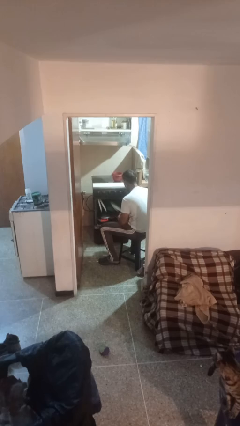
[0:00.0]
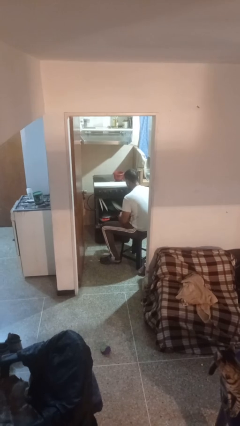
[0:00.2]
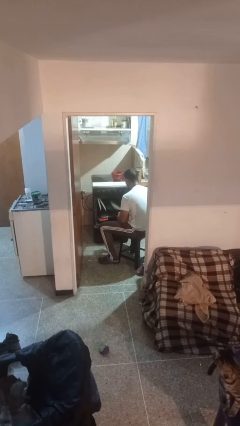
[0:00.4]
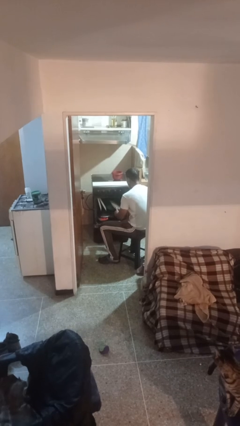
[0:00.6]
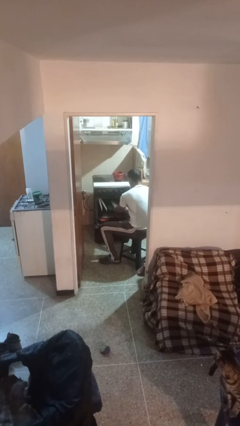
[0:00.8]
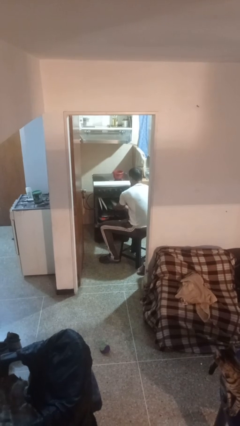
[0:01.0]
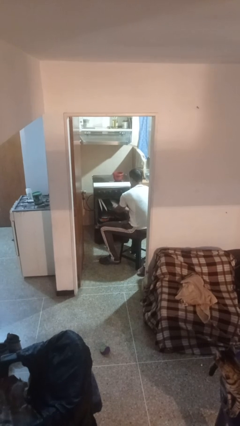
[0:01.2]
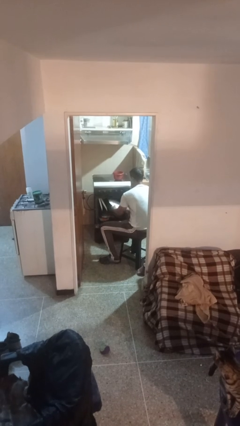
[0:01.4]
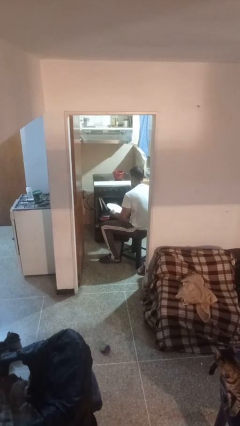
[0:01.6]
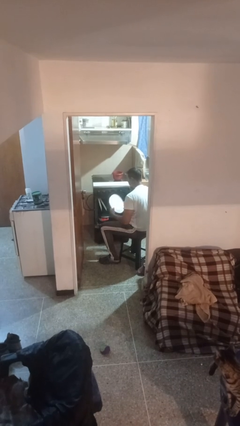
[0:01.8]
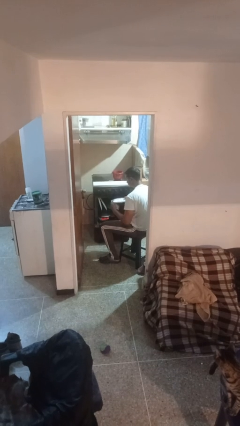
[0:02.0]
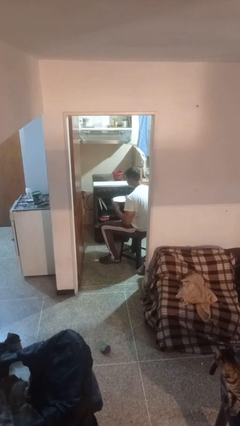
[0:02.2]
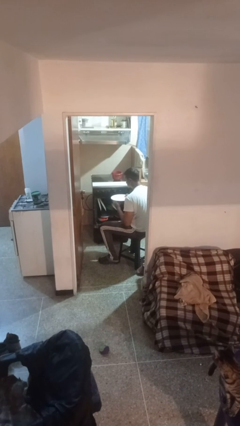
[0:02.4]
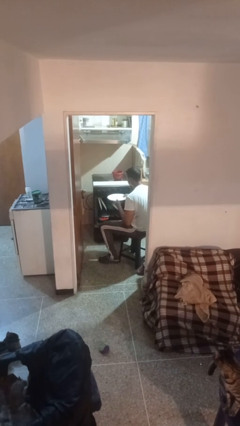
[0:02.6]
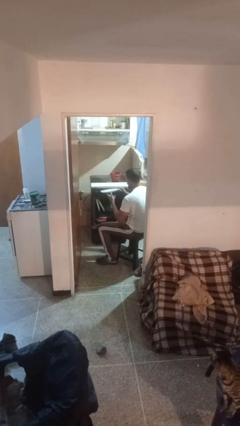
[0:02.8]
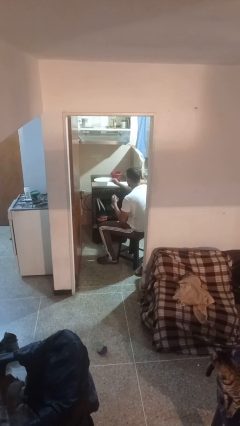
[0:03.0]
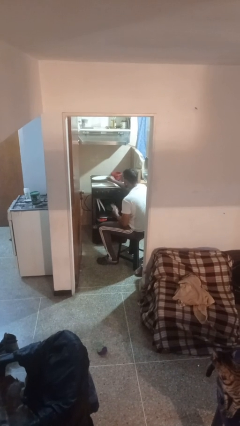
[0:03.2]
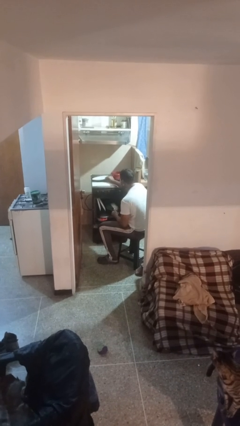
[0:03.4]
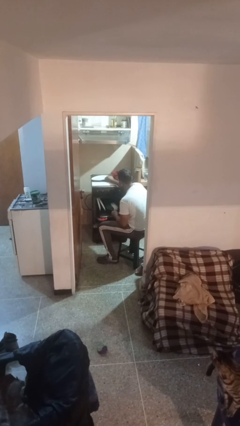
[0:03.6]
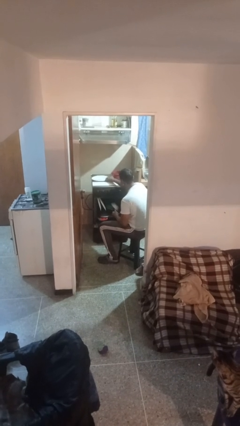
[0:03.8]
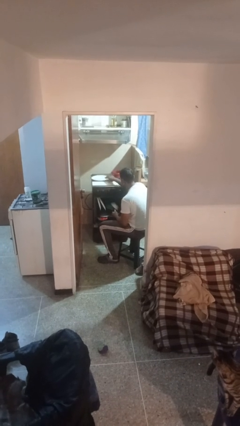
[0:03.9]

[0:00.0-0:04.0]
person unloads dishwasher

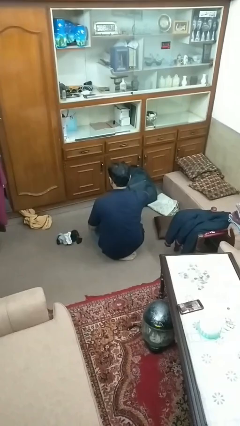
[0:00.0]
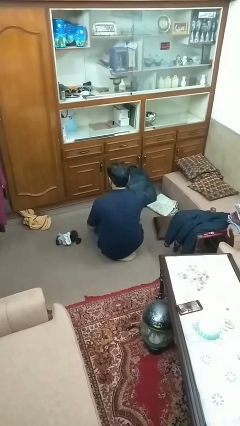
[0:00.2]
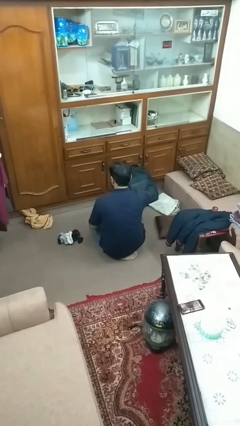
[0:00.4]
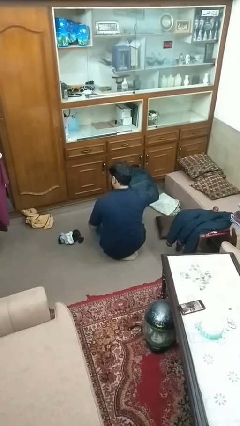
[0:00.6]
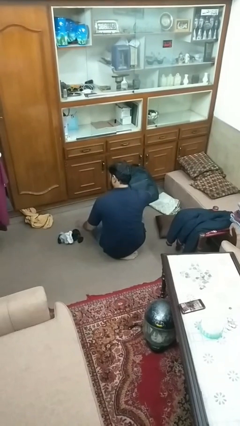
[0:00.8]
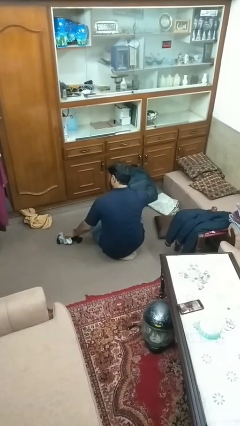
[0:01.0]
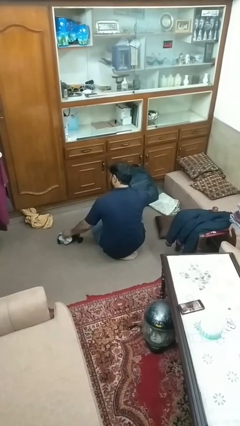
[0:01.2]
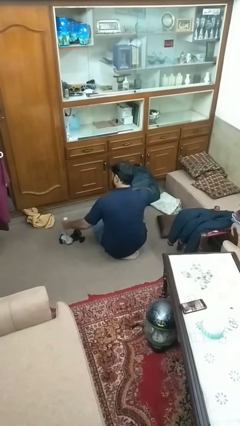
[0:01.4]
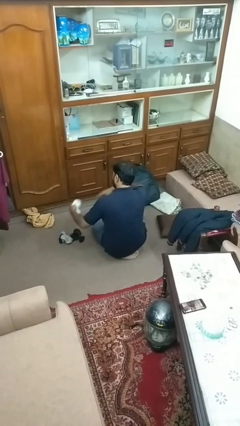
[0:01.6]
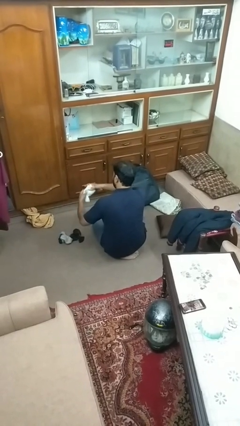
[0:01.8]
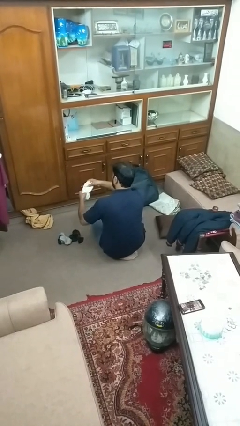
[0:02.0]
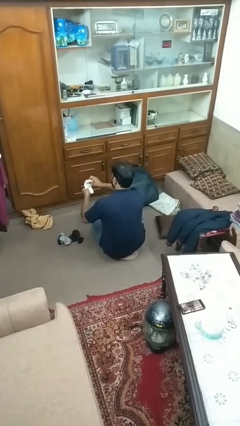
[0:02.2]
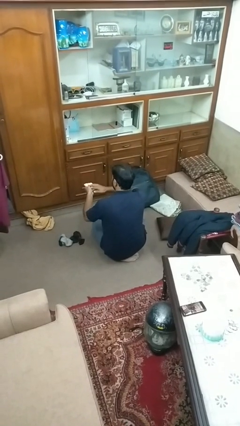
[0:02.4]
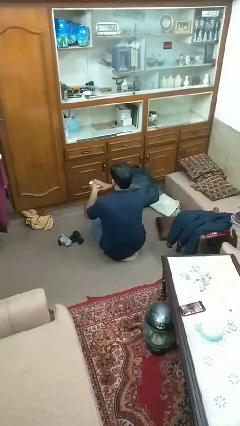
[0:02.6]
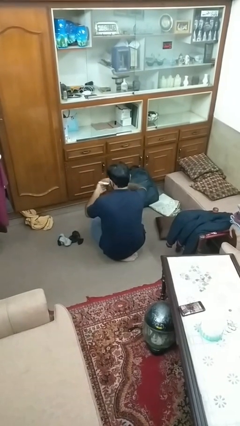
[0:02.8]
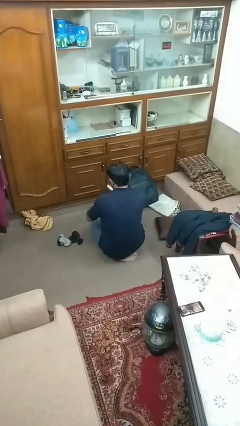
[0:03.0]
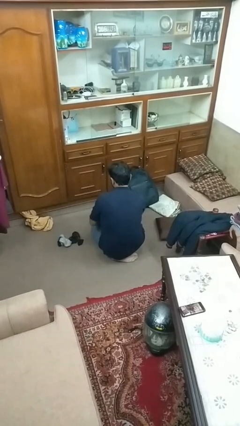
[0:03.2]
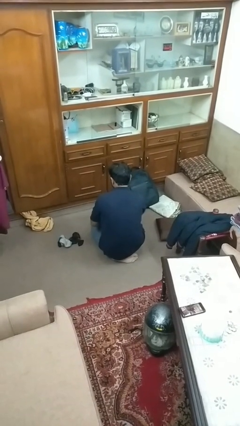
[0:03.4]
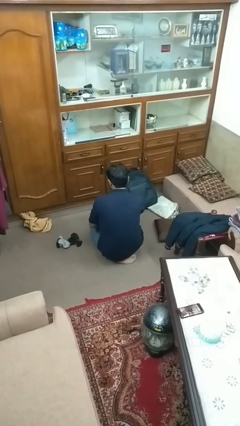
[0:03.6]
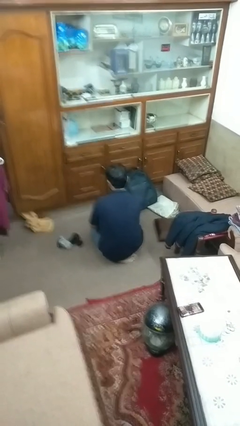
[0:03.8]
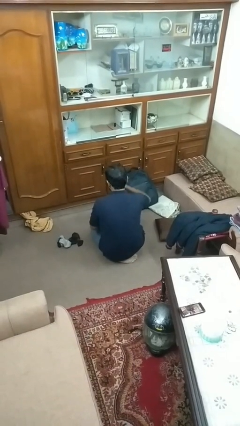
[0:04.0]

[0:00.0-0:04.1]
person folds socks

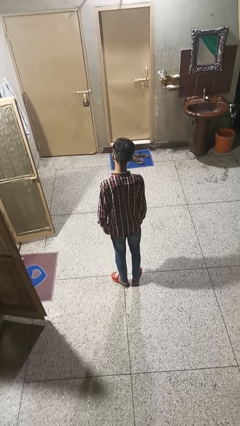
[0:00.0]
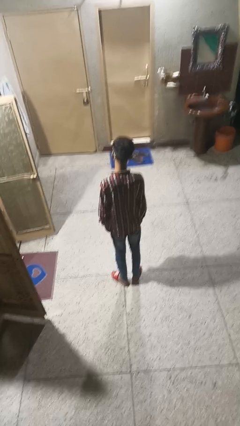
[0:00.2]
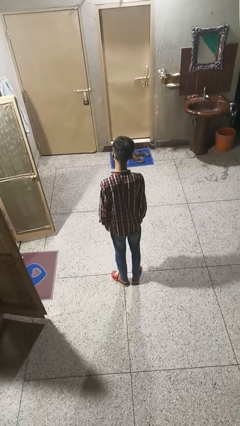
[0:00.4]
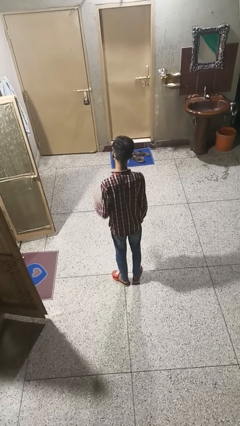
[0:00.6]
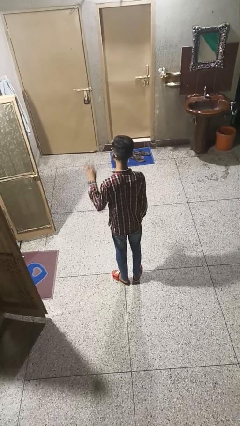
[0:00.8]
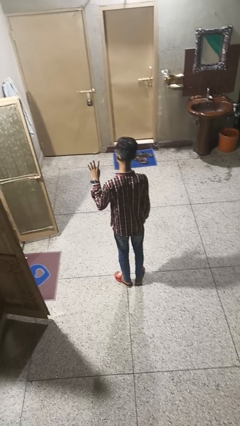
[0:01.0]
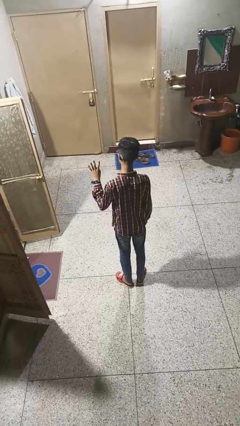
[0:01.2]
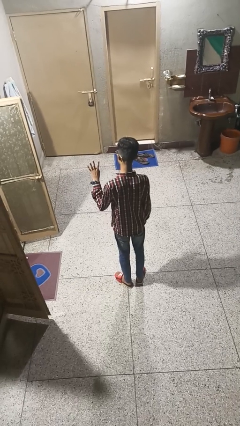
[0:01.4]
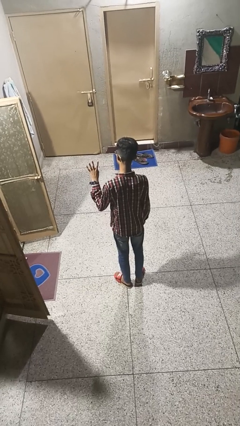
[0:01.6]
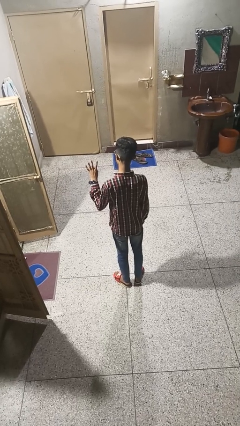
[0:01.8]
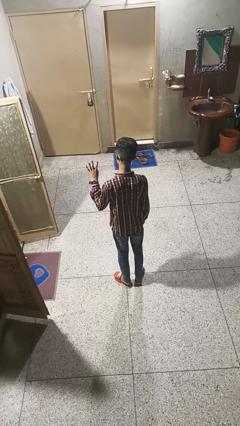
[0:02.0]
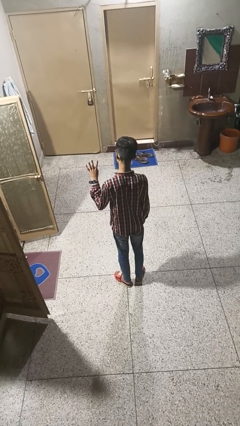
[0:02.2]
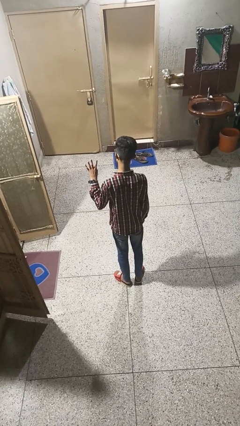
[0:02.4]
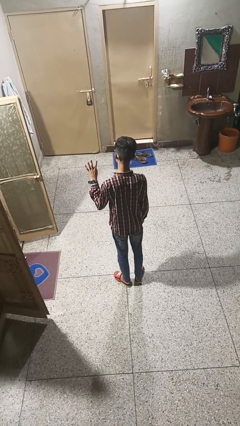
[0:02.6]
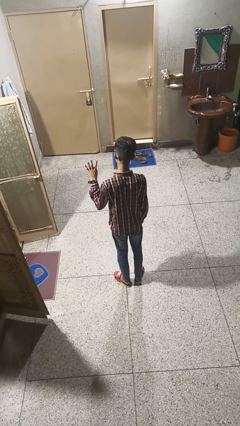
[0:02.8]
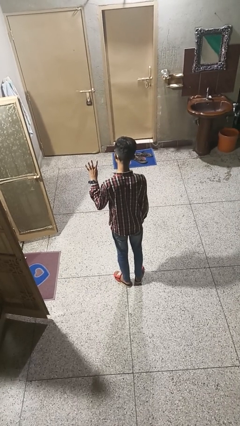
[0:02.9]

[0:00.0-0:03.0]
person gestures number four

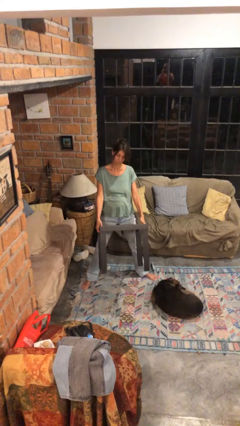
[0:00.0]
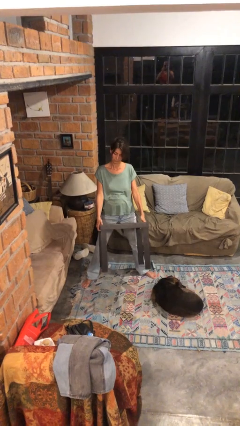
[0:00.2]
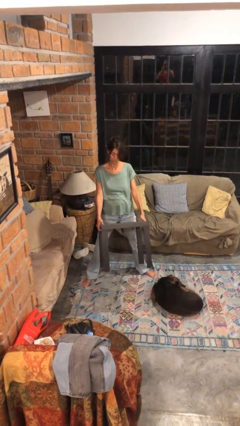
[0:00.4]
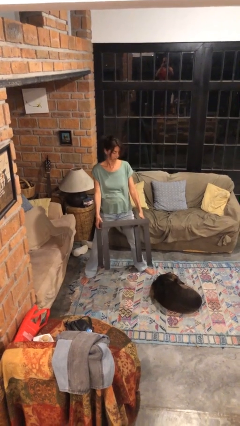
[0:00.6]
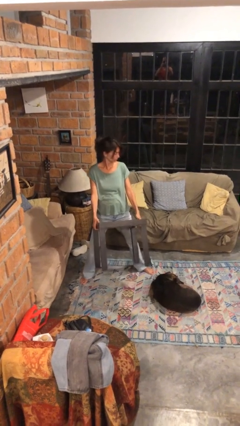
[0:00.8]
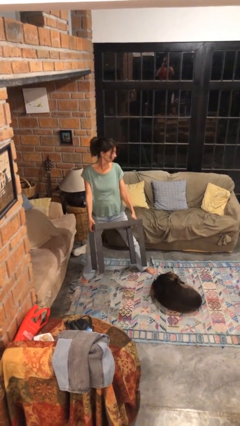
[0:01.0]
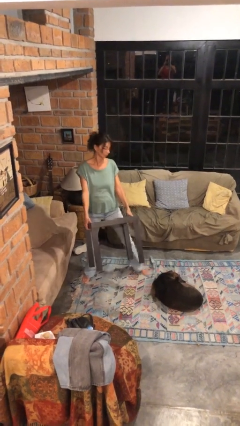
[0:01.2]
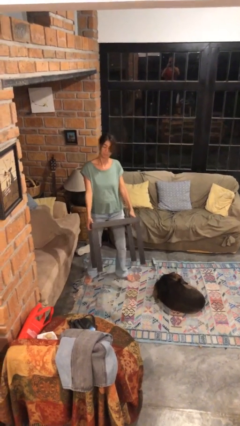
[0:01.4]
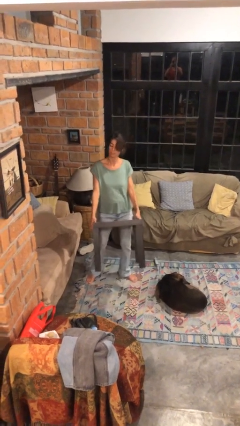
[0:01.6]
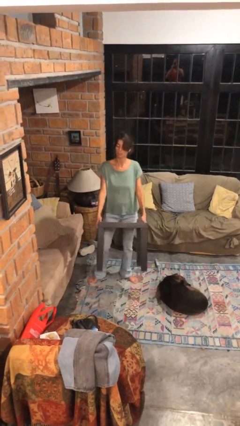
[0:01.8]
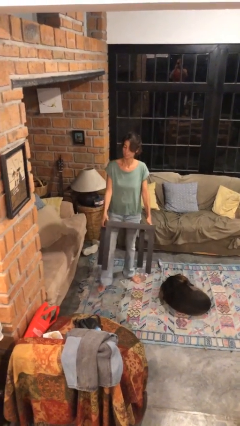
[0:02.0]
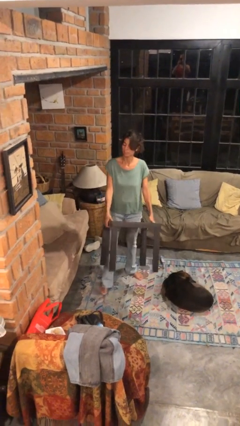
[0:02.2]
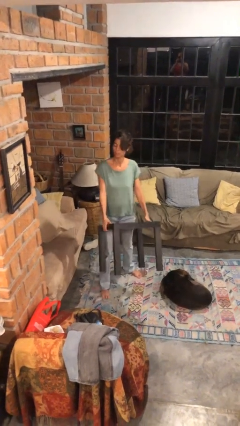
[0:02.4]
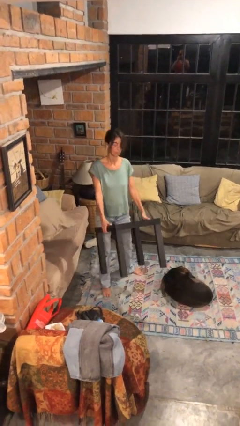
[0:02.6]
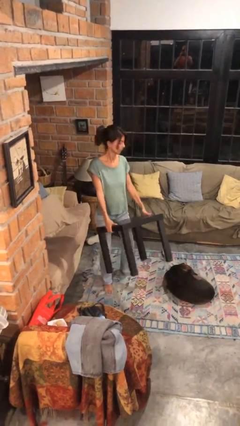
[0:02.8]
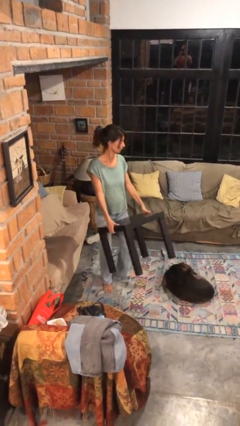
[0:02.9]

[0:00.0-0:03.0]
person carries furniture

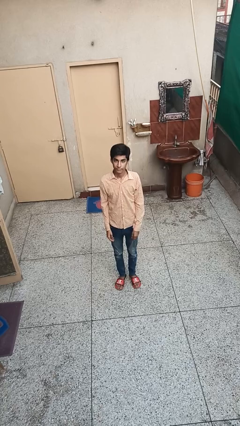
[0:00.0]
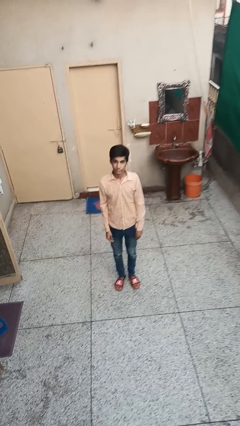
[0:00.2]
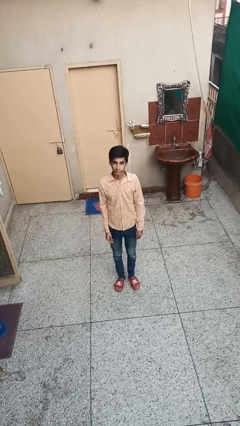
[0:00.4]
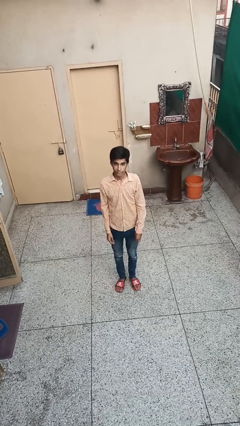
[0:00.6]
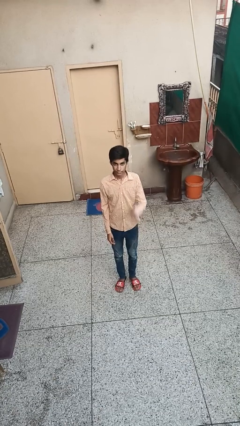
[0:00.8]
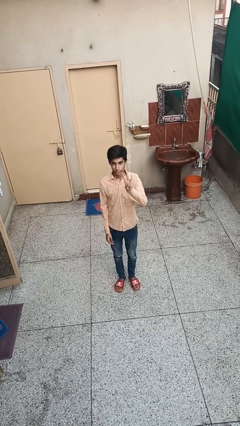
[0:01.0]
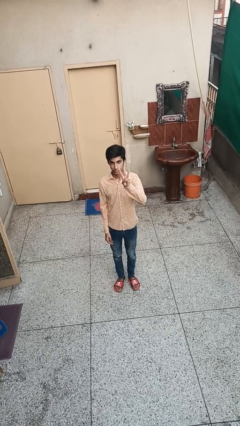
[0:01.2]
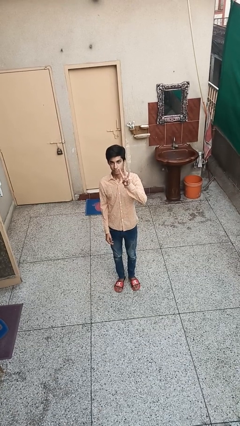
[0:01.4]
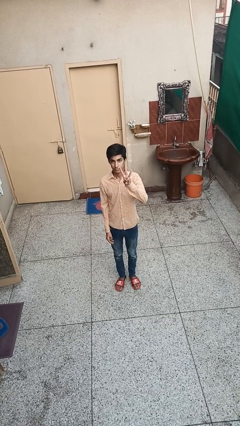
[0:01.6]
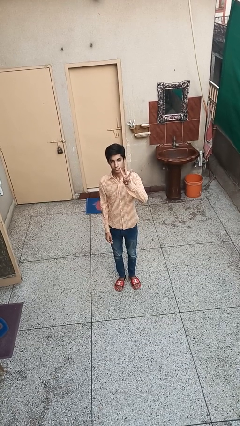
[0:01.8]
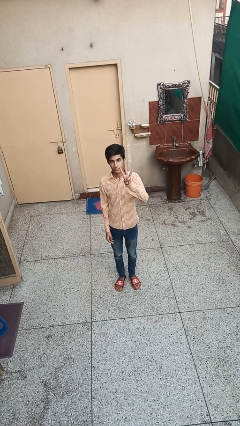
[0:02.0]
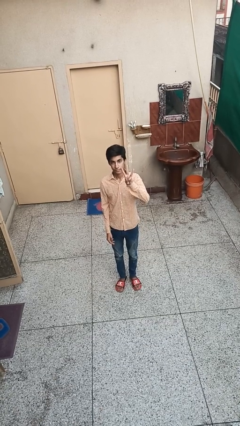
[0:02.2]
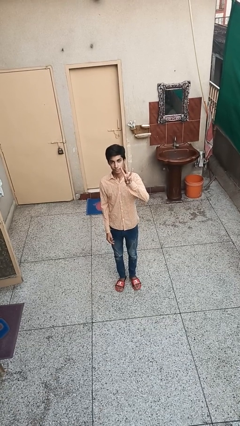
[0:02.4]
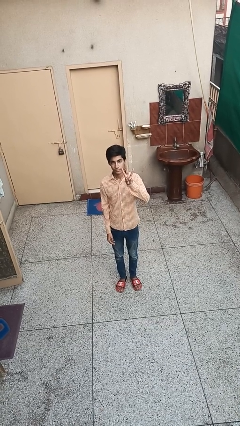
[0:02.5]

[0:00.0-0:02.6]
person gestures number three

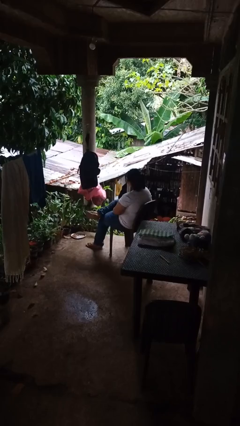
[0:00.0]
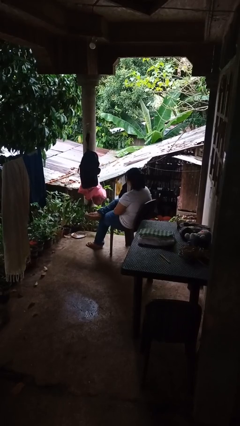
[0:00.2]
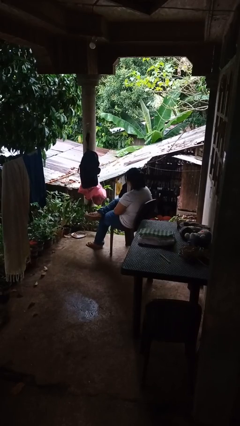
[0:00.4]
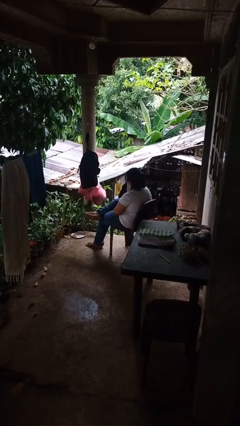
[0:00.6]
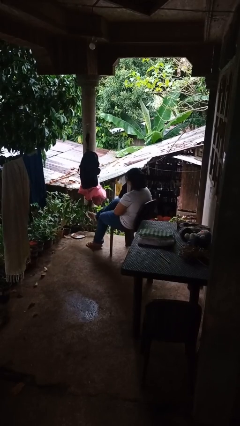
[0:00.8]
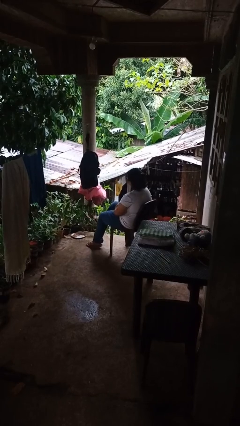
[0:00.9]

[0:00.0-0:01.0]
person crosses legs
